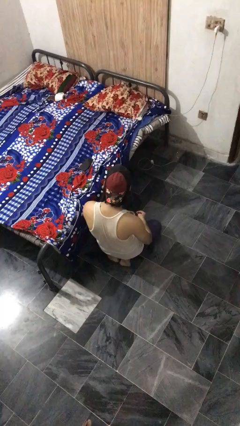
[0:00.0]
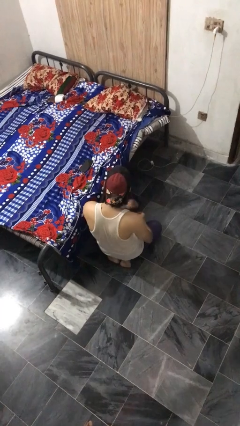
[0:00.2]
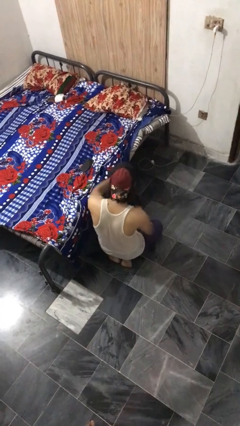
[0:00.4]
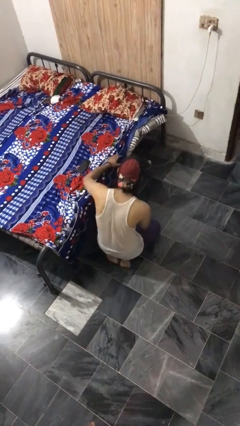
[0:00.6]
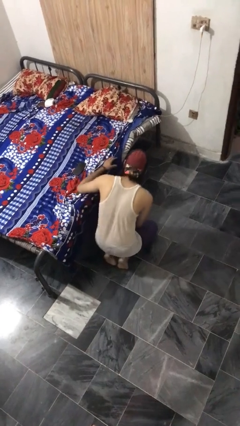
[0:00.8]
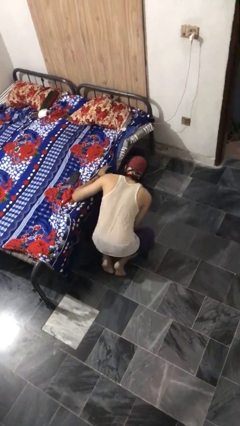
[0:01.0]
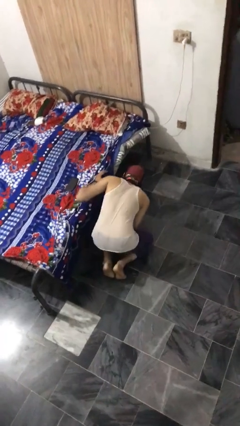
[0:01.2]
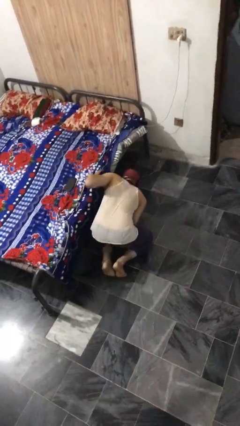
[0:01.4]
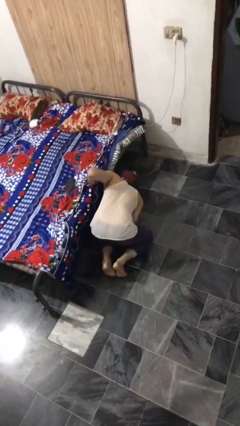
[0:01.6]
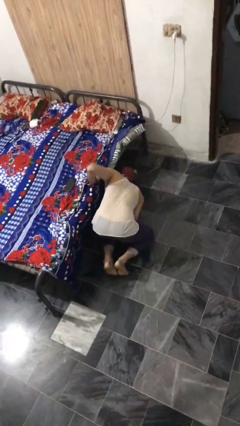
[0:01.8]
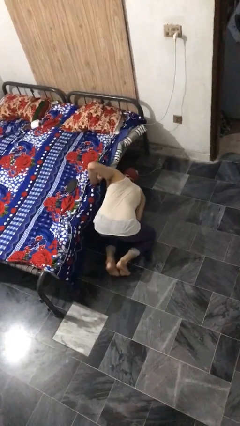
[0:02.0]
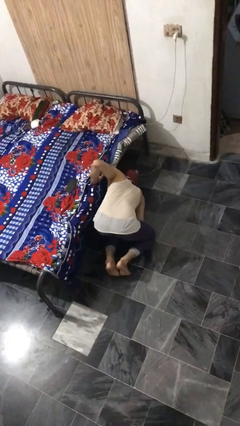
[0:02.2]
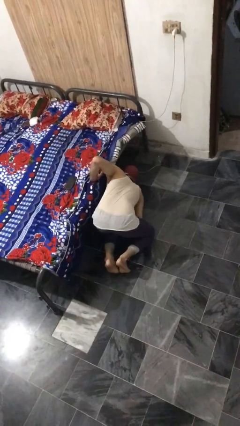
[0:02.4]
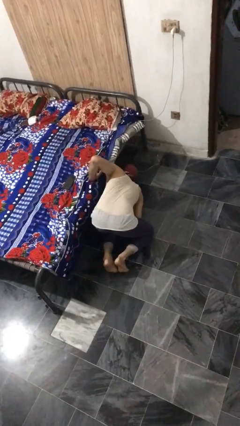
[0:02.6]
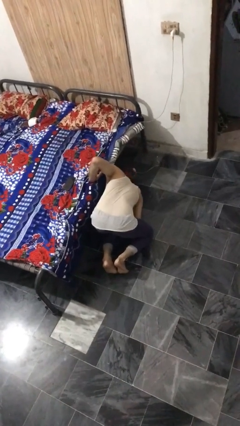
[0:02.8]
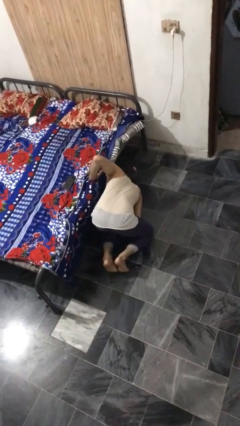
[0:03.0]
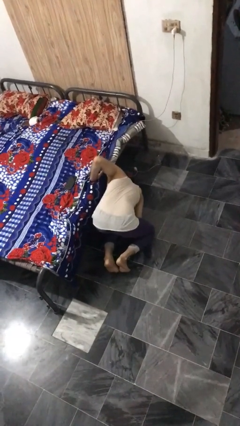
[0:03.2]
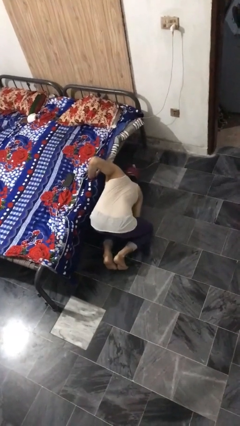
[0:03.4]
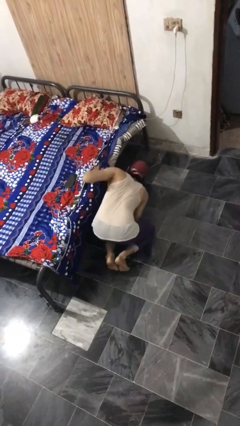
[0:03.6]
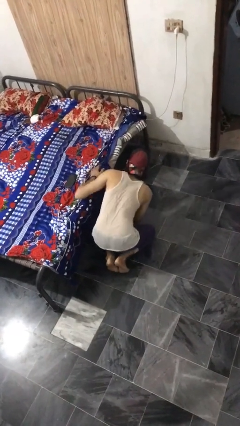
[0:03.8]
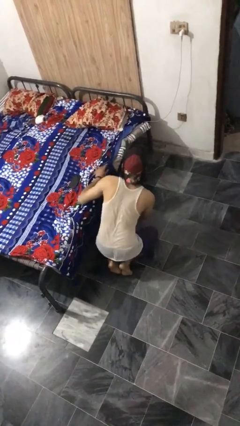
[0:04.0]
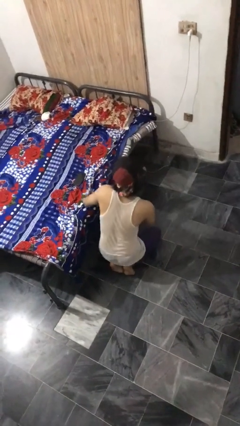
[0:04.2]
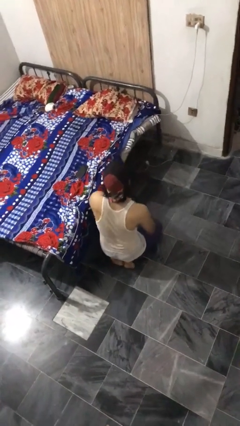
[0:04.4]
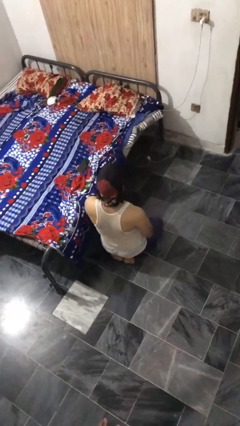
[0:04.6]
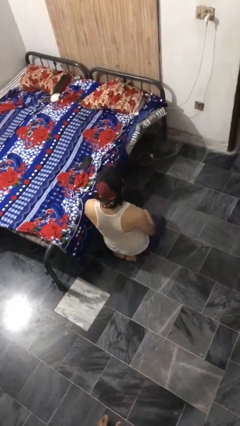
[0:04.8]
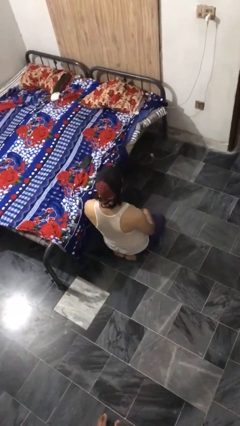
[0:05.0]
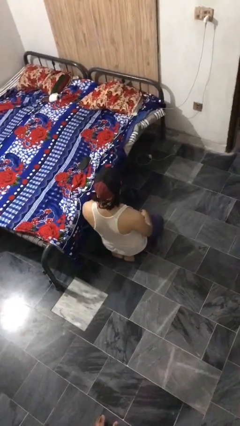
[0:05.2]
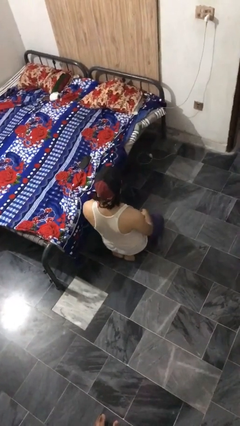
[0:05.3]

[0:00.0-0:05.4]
person searches under bed

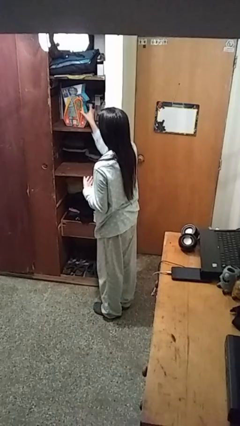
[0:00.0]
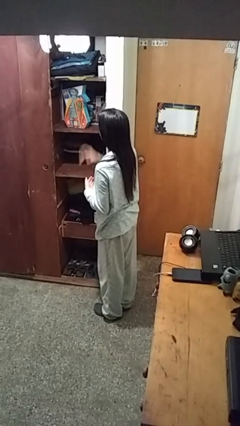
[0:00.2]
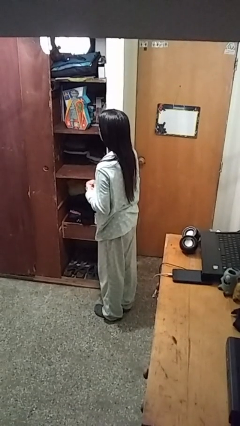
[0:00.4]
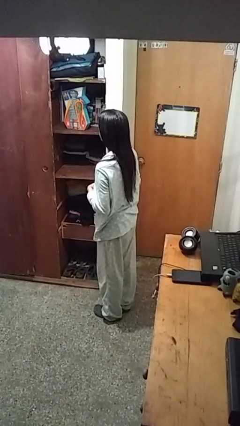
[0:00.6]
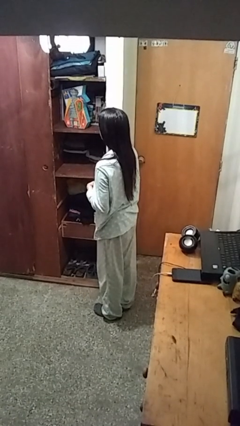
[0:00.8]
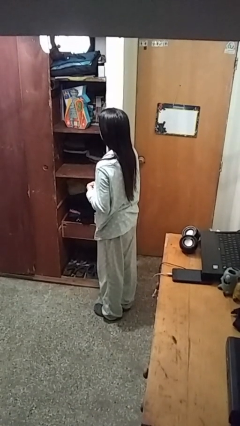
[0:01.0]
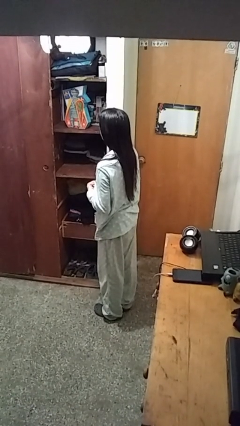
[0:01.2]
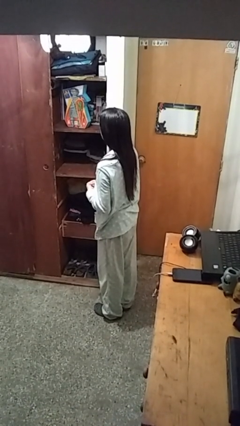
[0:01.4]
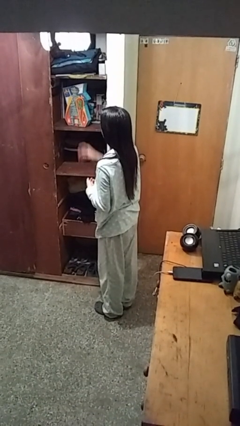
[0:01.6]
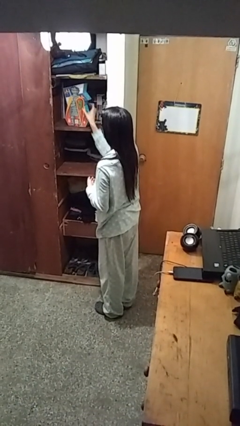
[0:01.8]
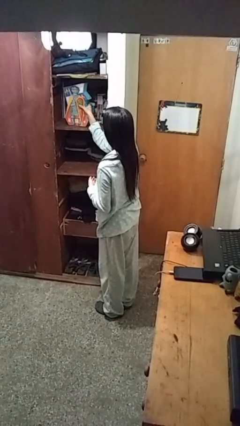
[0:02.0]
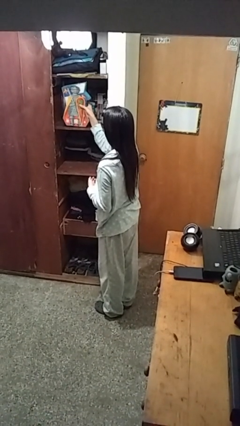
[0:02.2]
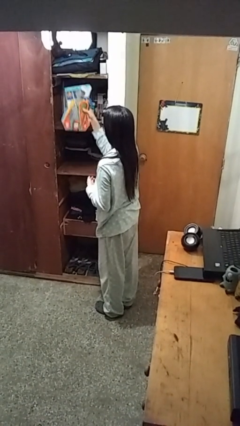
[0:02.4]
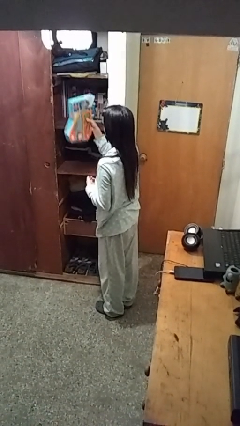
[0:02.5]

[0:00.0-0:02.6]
person puts down object on shelf

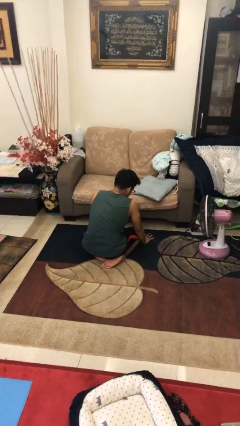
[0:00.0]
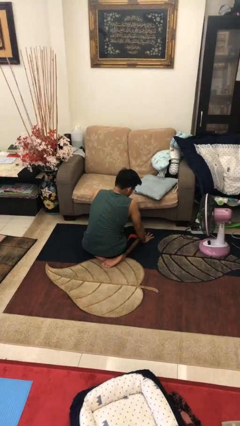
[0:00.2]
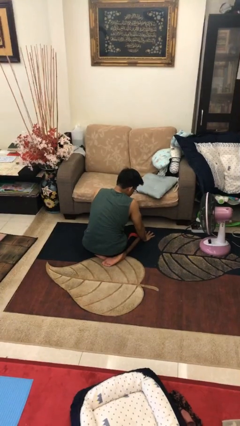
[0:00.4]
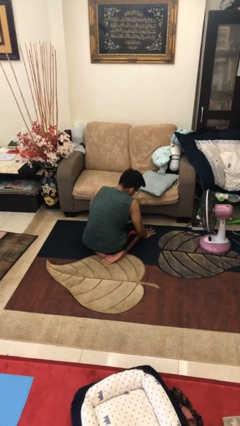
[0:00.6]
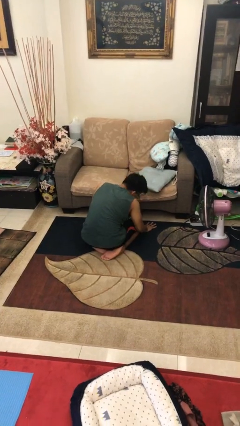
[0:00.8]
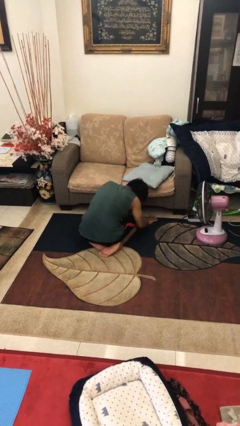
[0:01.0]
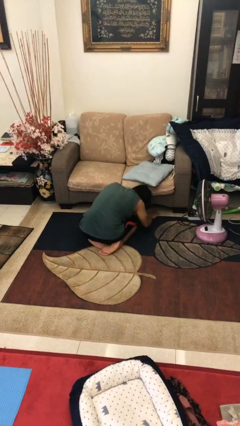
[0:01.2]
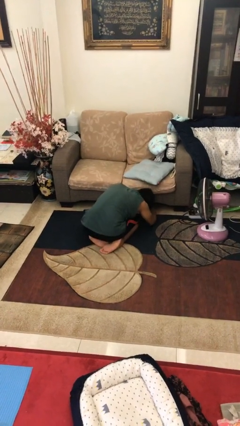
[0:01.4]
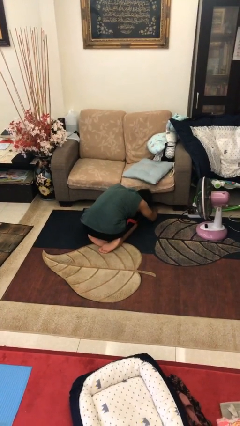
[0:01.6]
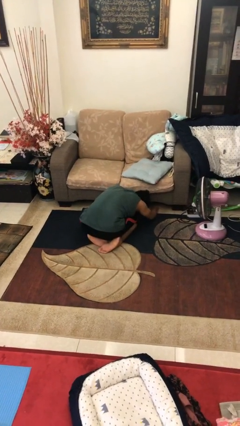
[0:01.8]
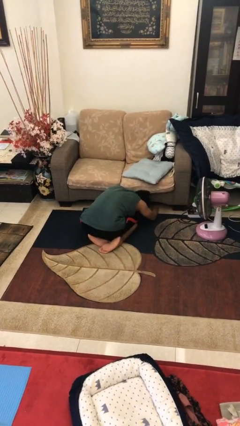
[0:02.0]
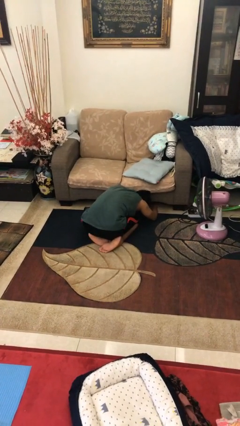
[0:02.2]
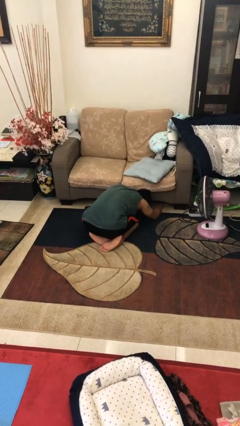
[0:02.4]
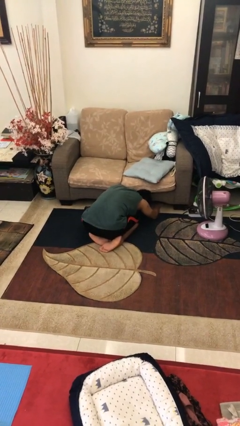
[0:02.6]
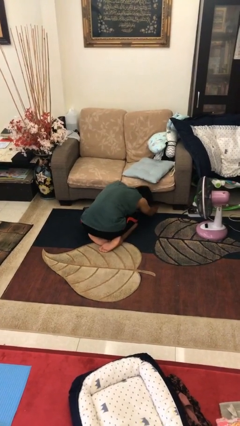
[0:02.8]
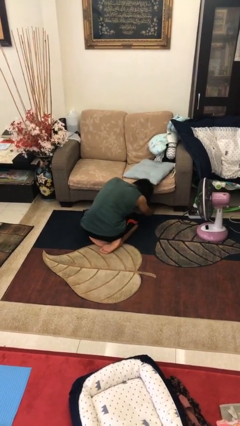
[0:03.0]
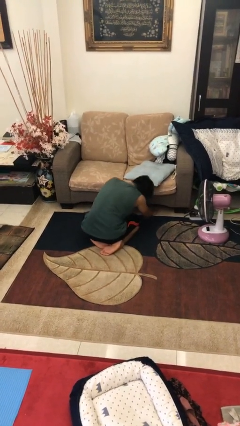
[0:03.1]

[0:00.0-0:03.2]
person searches under couch

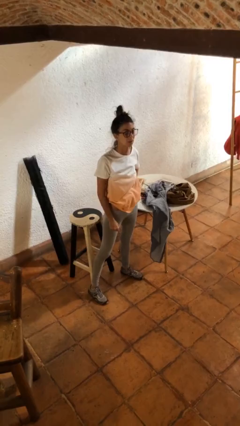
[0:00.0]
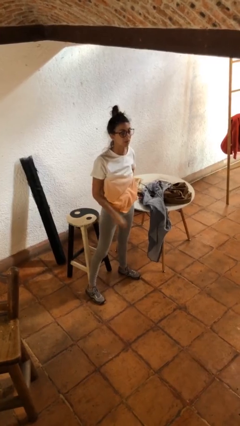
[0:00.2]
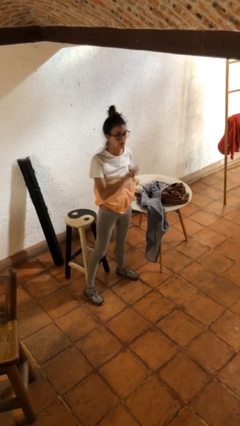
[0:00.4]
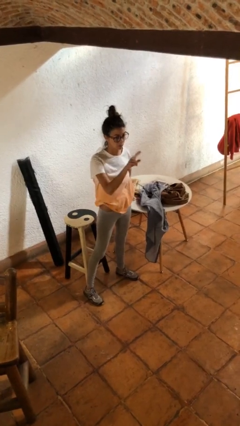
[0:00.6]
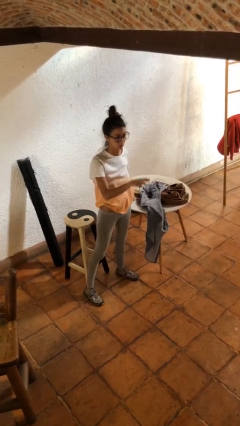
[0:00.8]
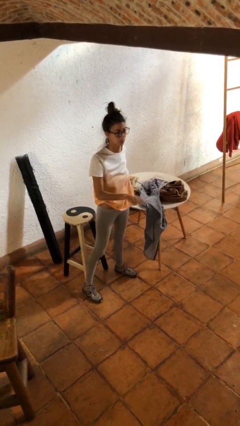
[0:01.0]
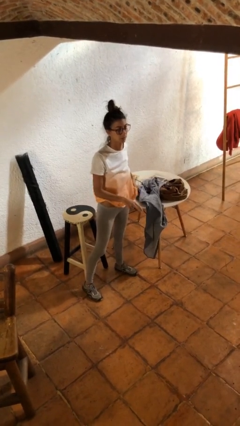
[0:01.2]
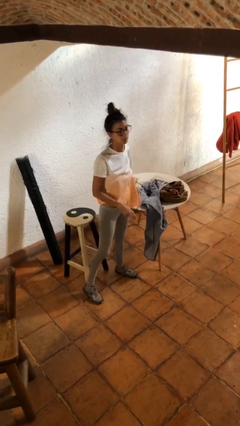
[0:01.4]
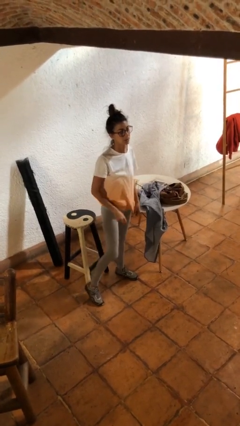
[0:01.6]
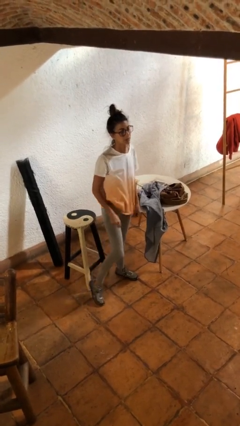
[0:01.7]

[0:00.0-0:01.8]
person gestures swipe down

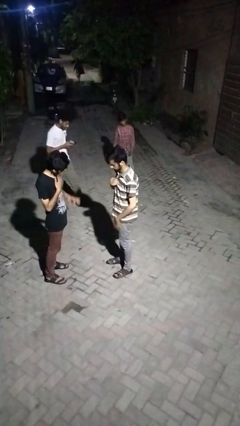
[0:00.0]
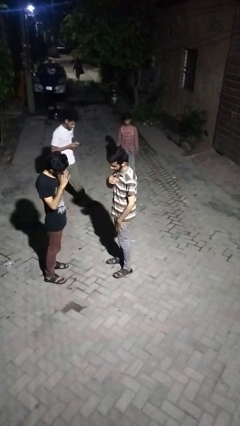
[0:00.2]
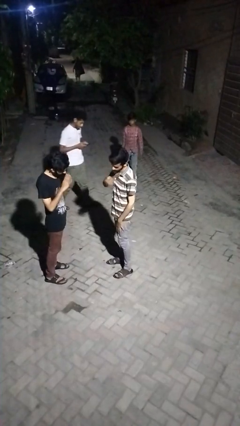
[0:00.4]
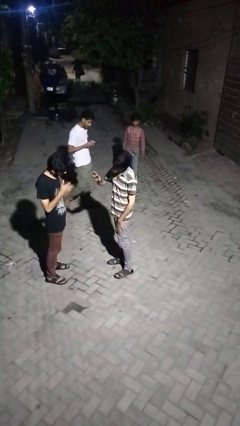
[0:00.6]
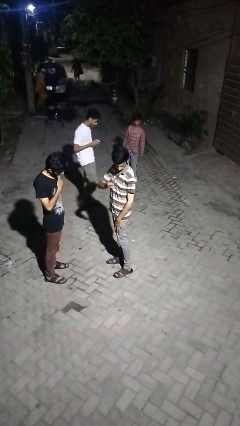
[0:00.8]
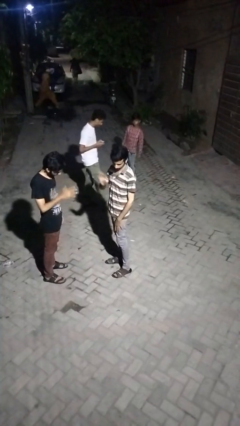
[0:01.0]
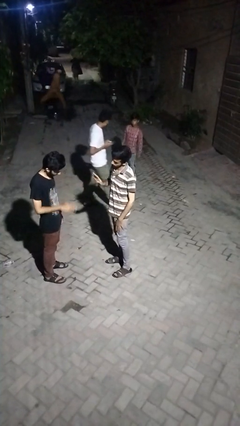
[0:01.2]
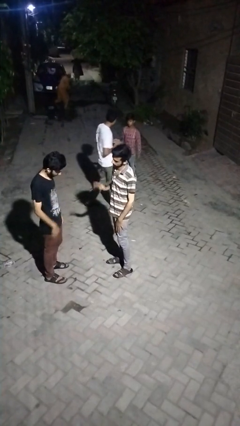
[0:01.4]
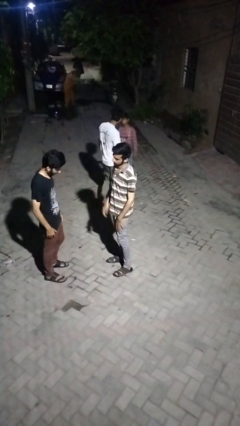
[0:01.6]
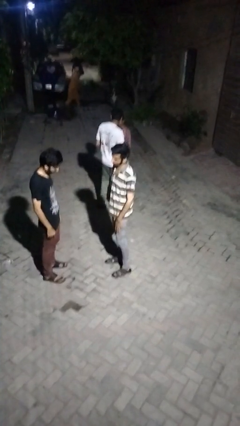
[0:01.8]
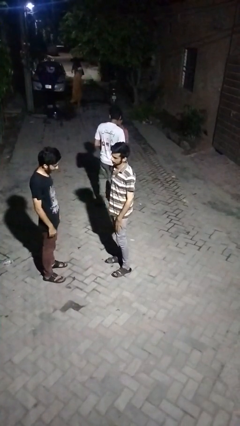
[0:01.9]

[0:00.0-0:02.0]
person talks to person

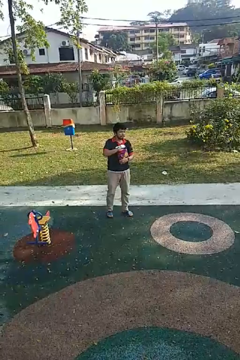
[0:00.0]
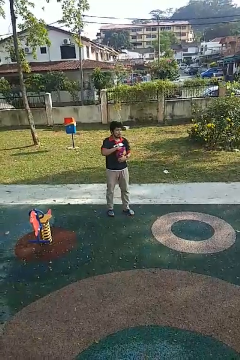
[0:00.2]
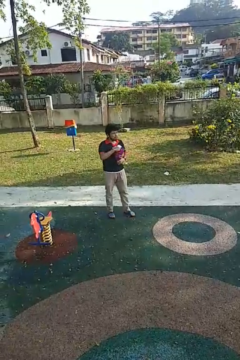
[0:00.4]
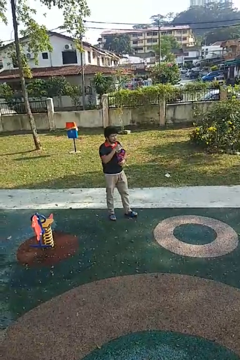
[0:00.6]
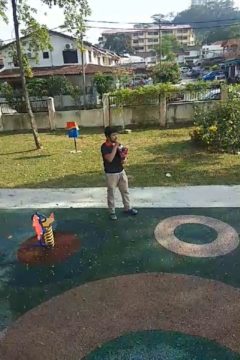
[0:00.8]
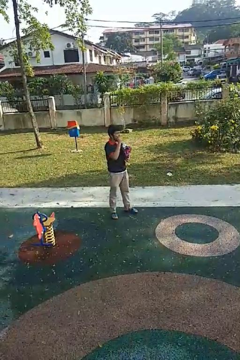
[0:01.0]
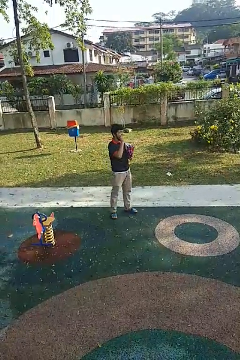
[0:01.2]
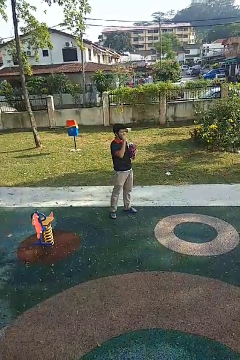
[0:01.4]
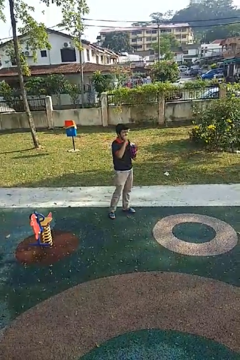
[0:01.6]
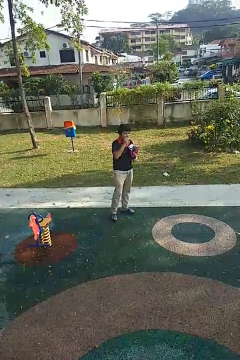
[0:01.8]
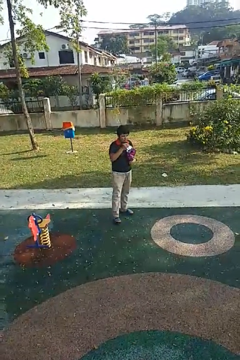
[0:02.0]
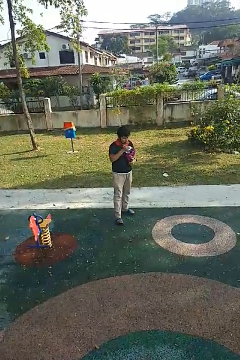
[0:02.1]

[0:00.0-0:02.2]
person eats snack from bag

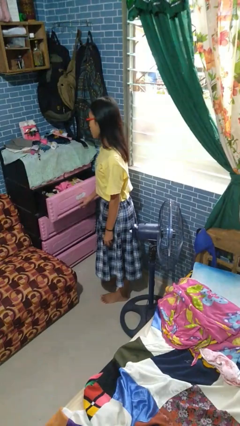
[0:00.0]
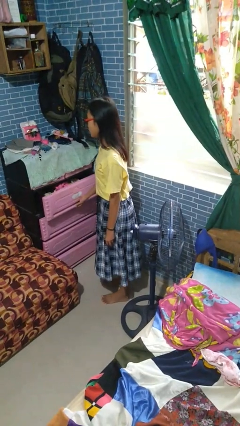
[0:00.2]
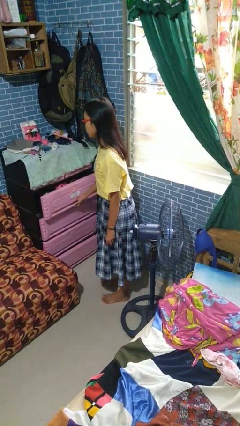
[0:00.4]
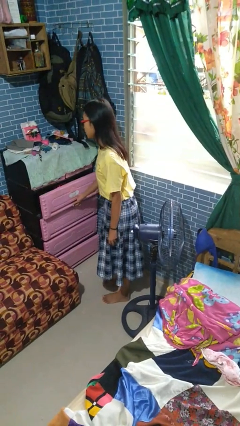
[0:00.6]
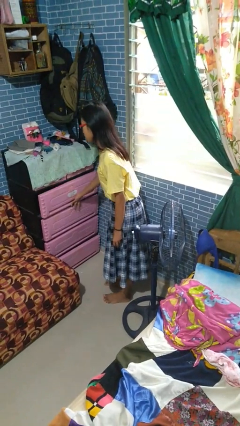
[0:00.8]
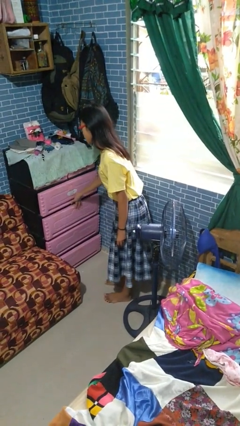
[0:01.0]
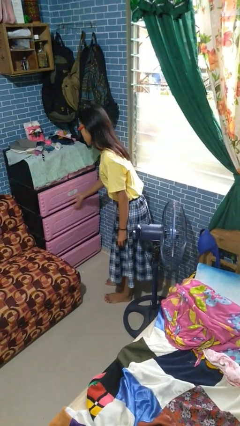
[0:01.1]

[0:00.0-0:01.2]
person closes dresser drawer
